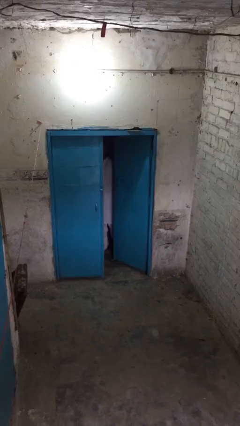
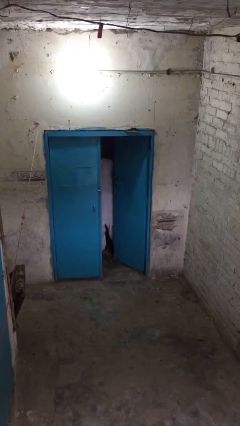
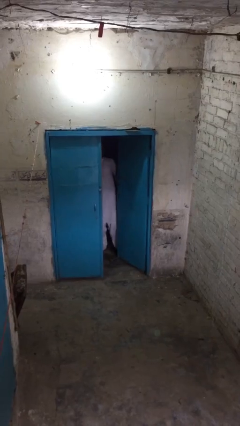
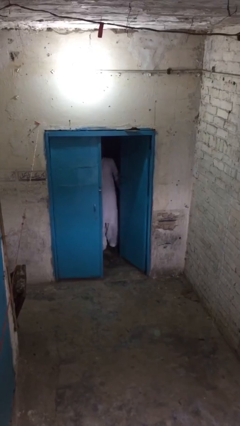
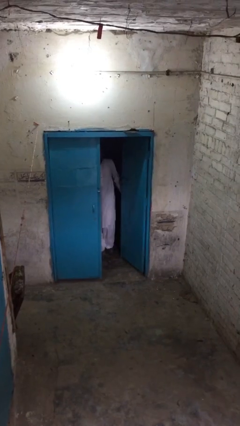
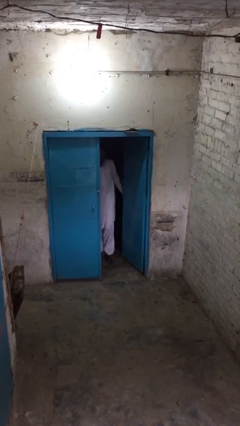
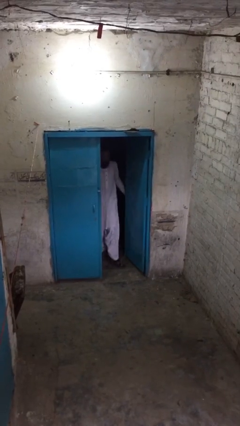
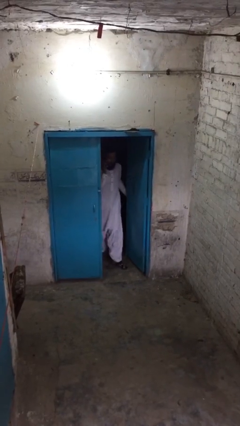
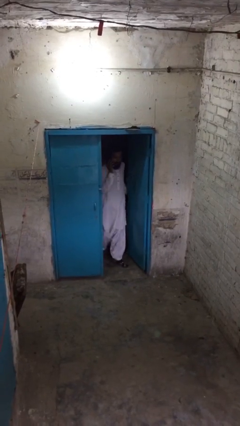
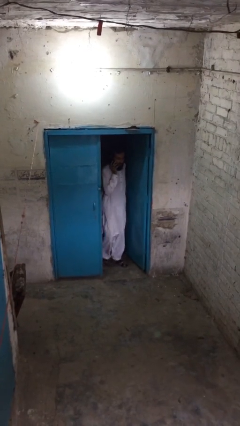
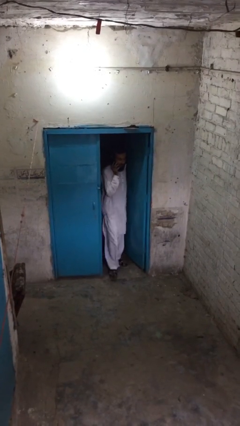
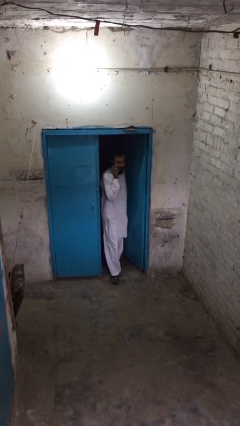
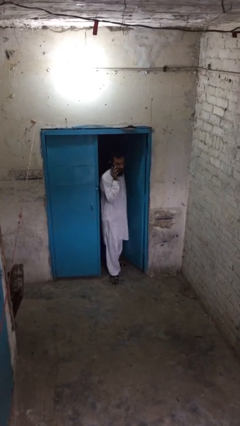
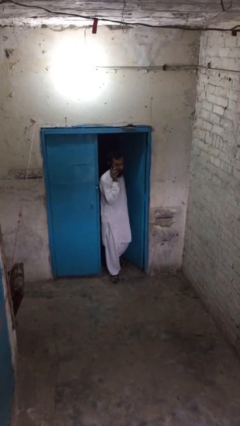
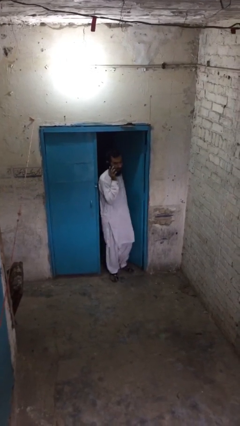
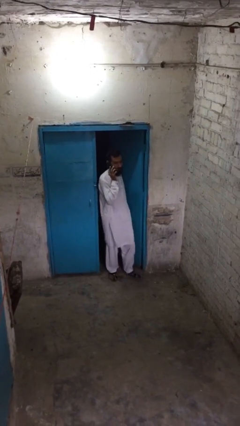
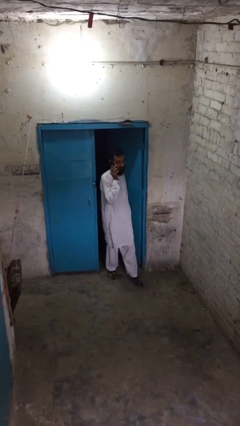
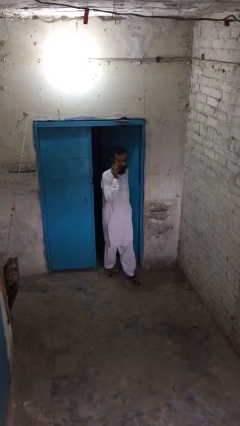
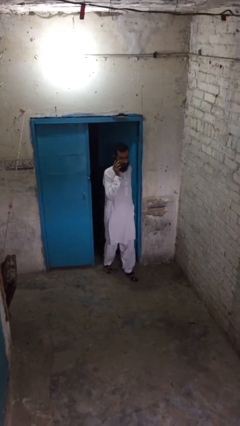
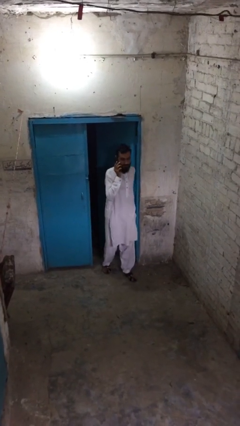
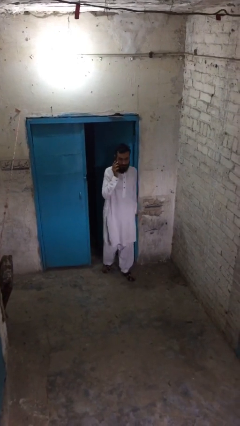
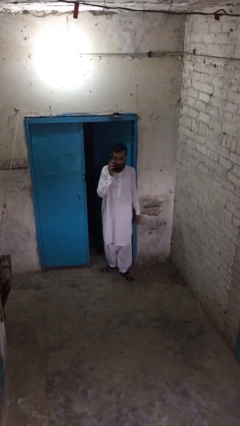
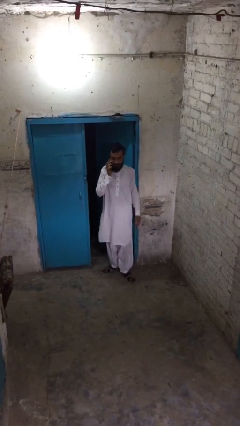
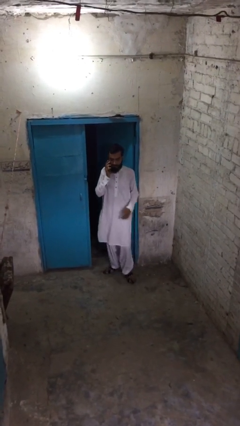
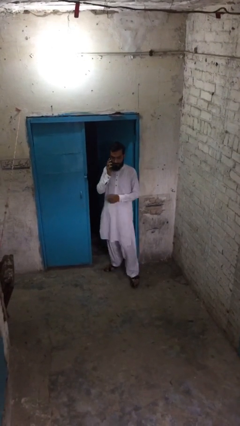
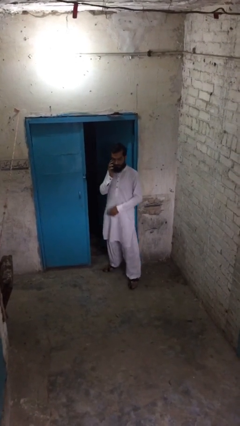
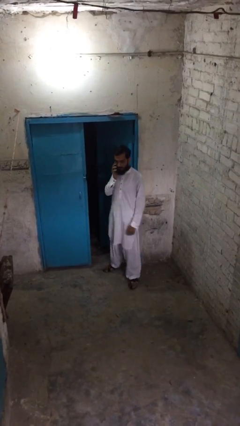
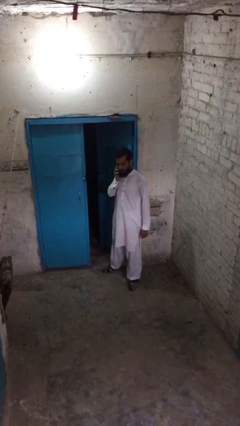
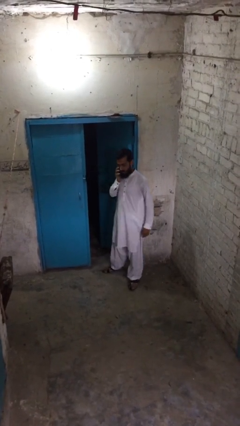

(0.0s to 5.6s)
person enters scene through structure

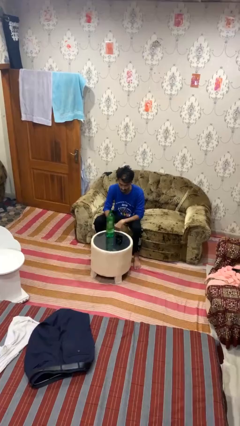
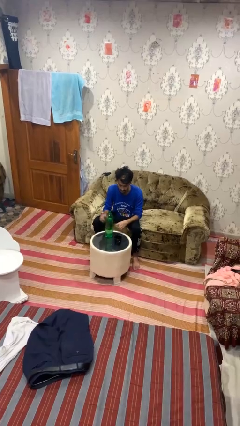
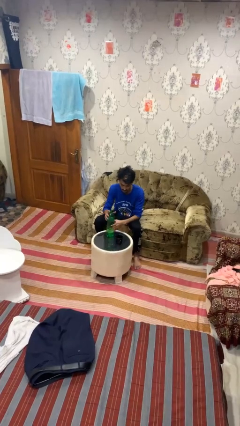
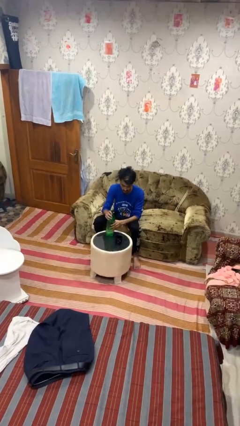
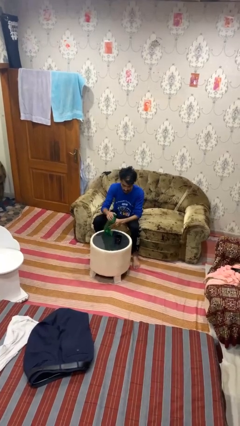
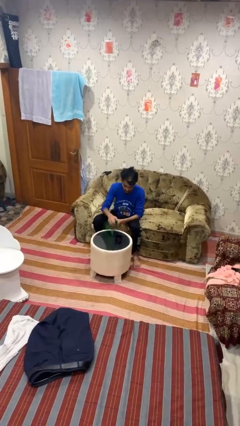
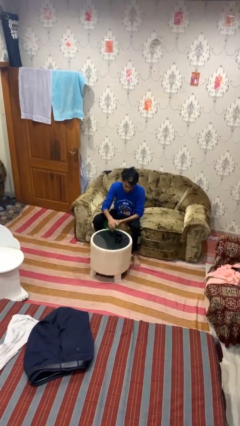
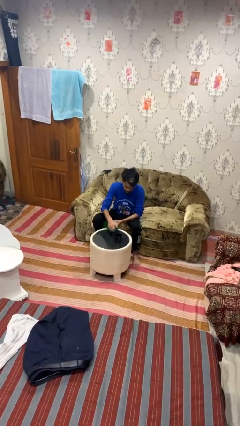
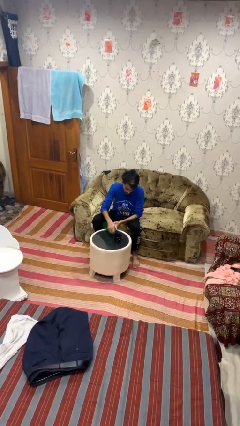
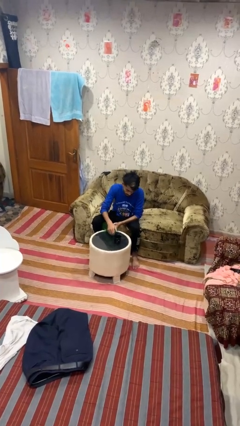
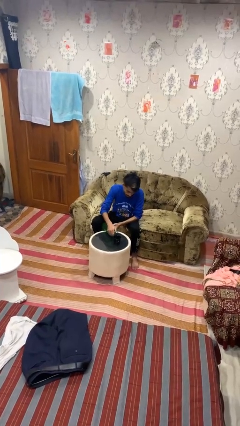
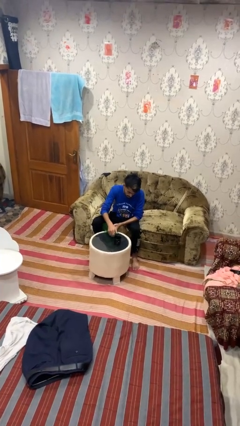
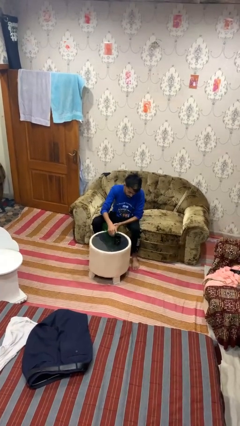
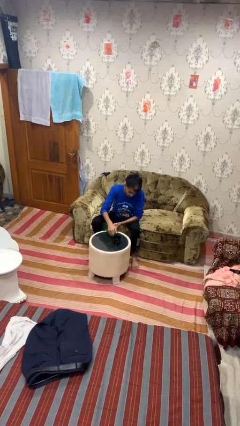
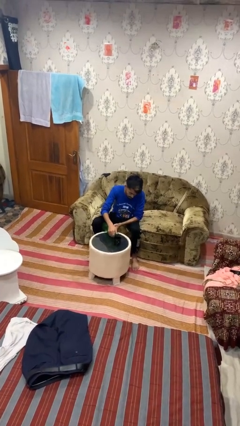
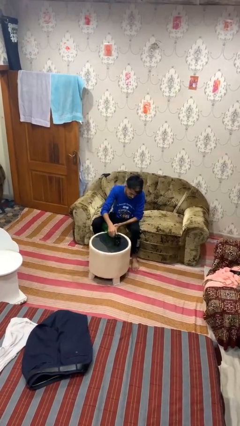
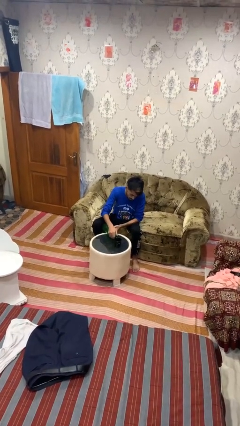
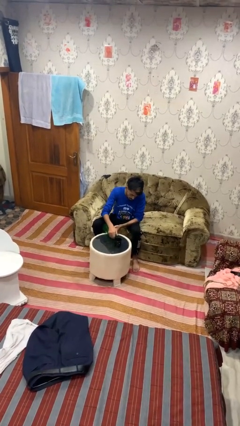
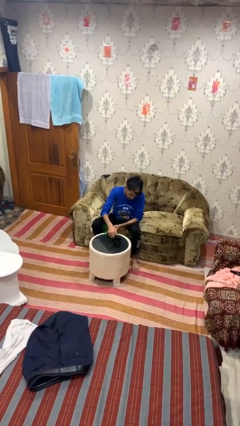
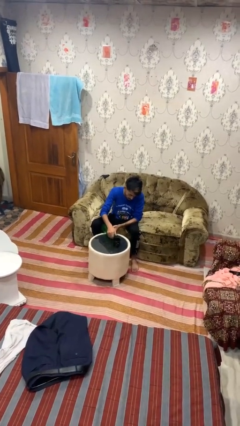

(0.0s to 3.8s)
person pours liquid into cup

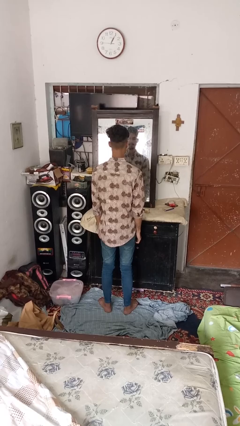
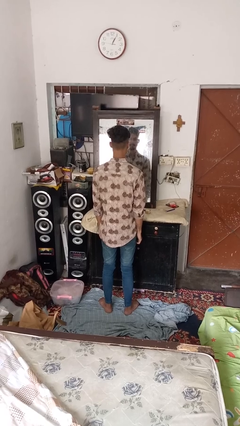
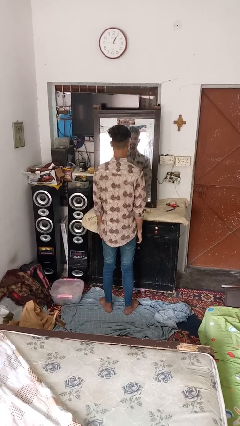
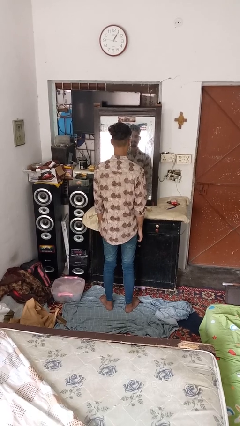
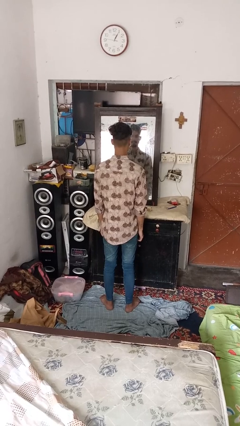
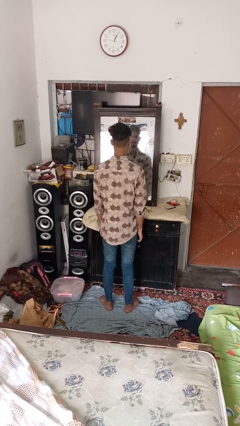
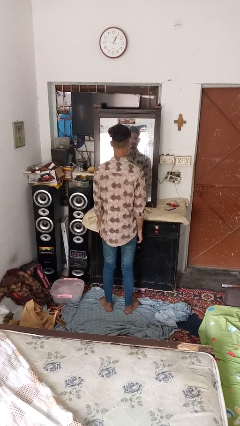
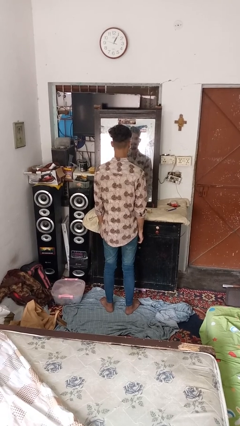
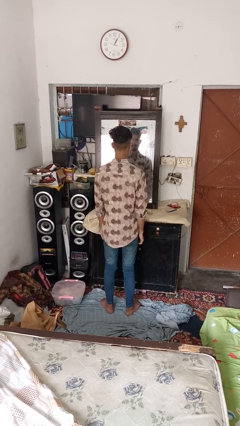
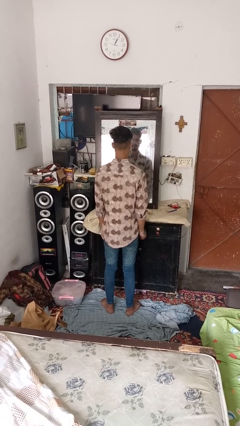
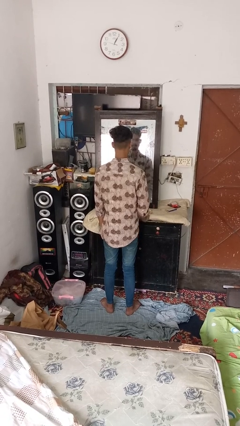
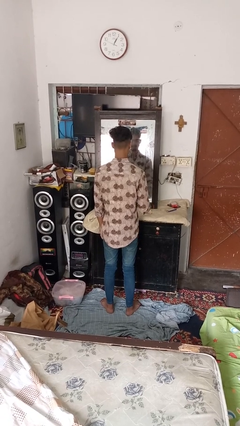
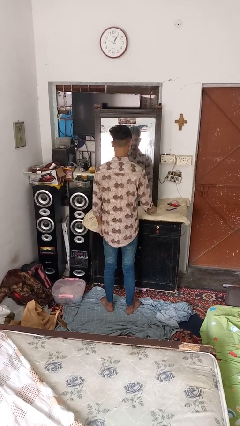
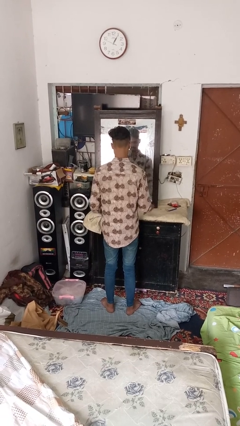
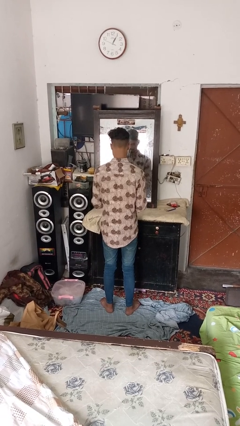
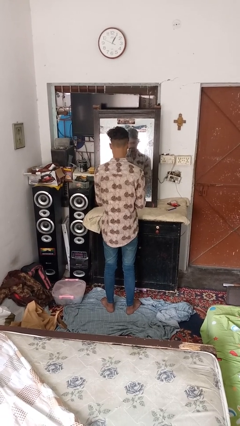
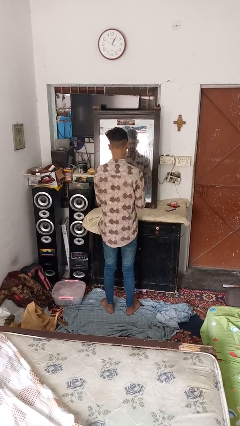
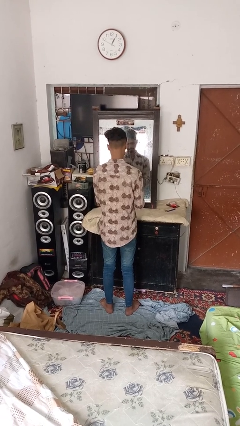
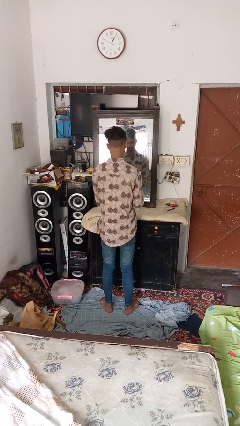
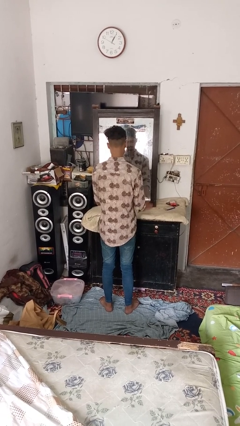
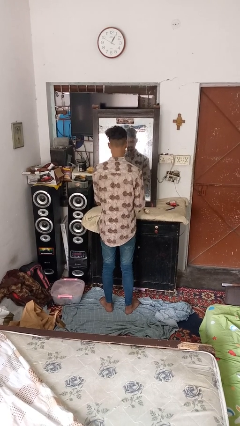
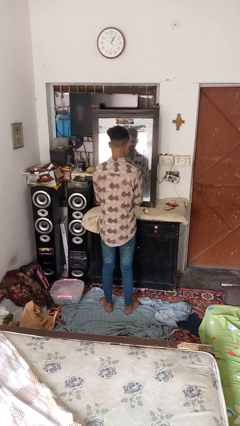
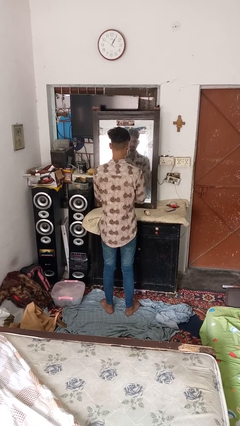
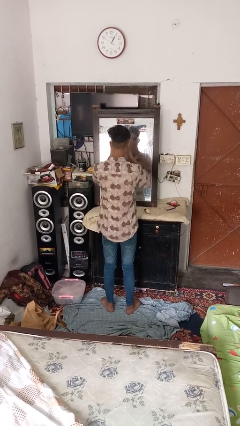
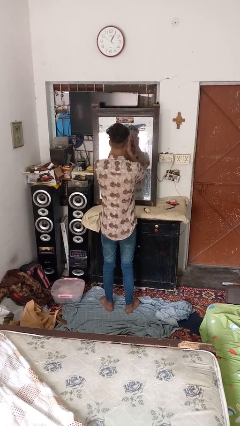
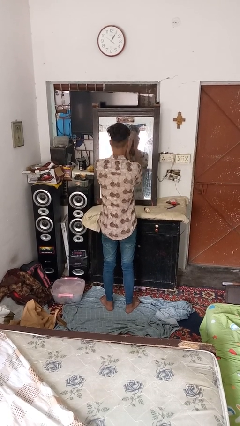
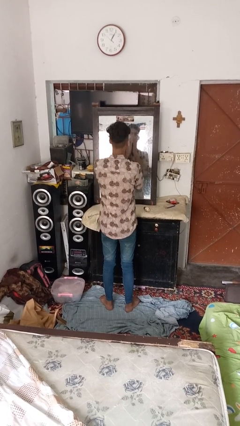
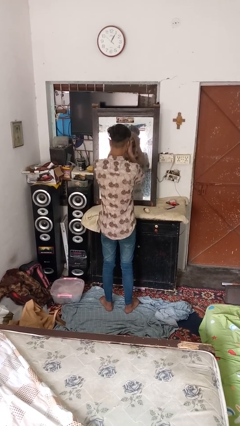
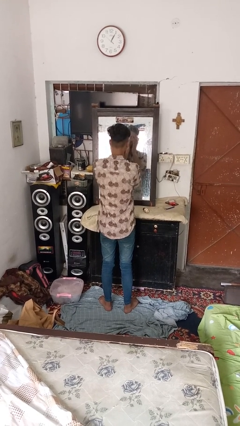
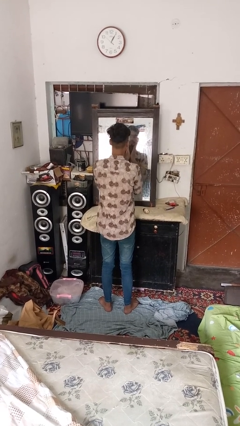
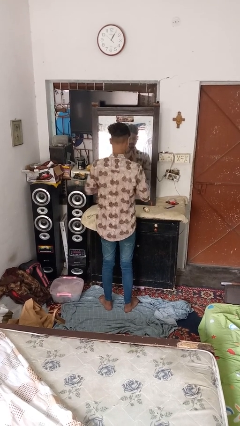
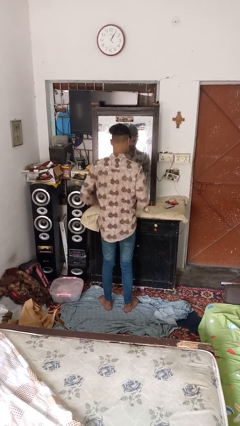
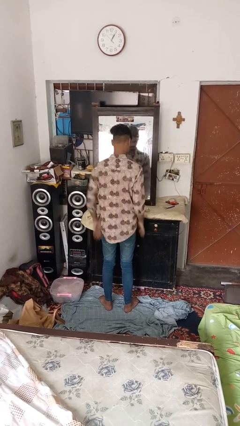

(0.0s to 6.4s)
person applies foundation makeup

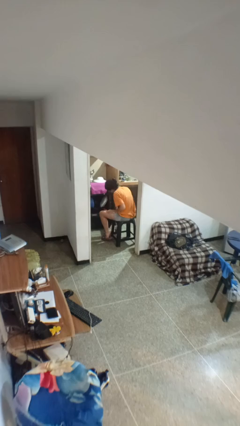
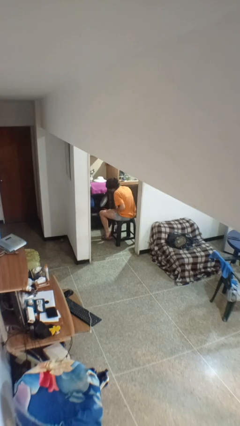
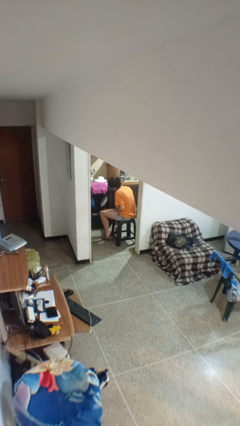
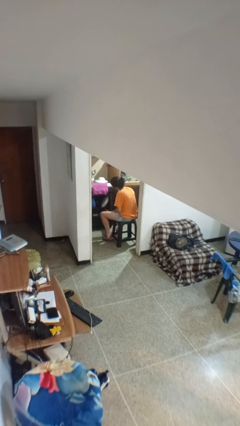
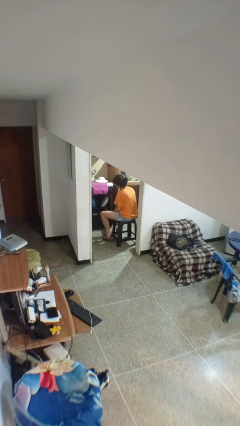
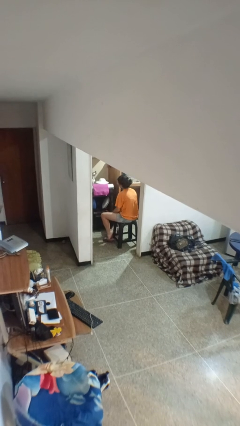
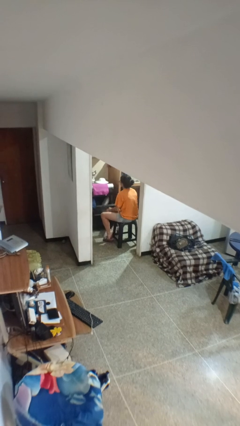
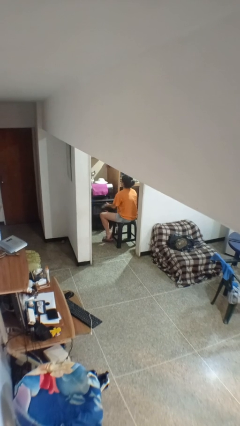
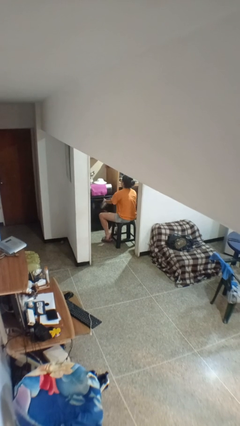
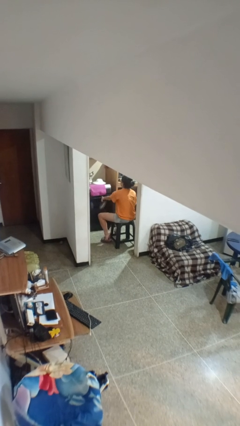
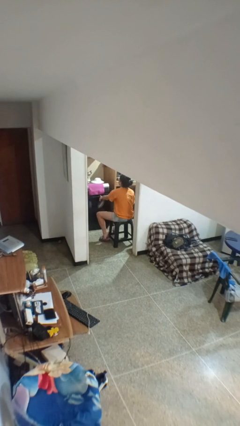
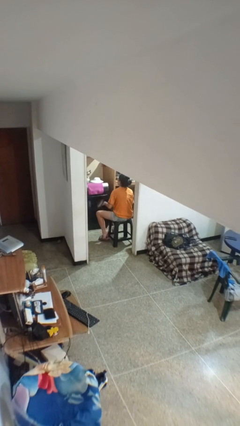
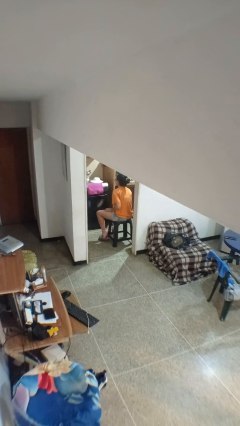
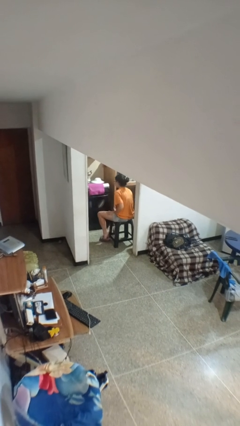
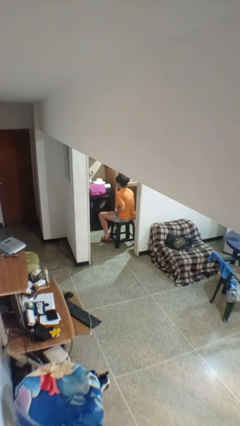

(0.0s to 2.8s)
person closes dishwasher
